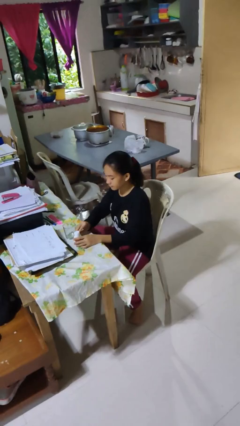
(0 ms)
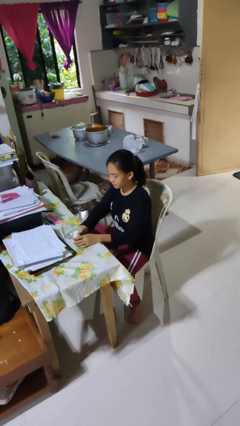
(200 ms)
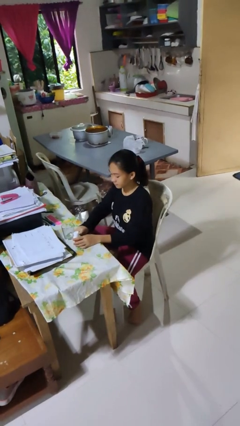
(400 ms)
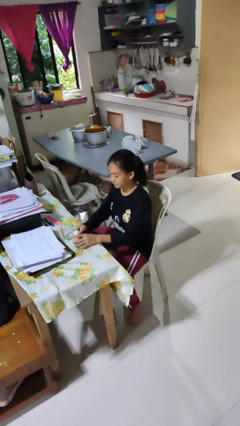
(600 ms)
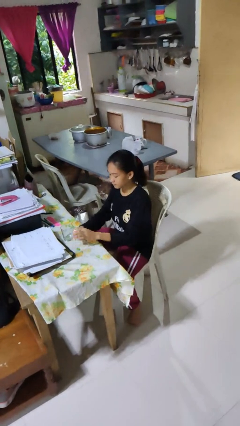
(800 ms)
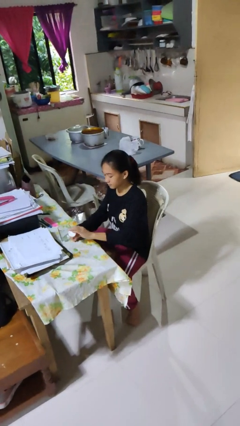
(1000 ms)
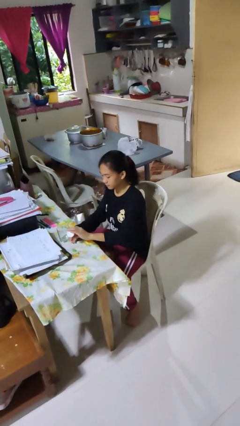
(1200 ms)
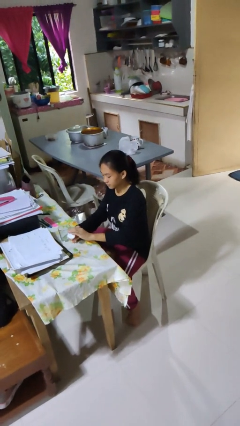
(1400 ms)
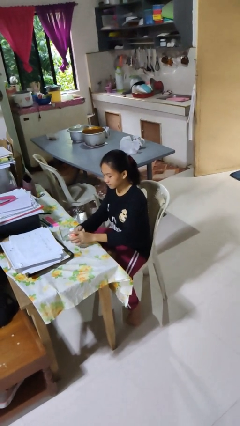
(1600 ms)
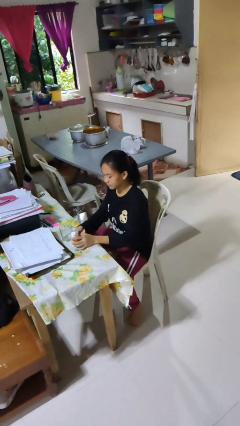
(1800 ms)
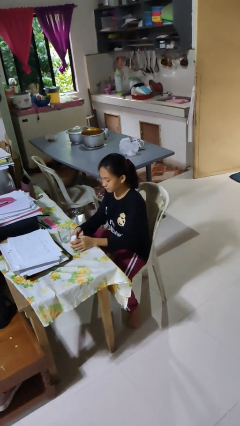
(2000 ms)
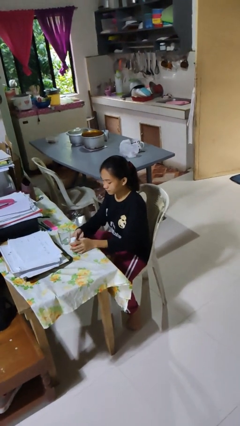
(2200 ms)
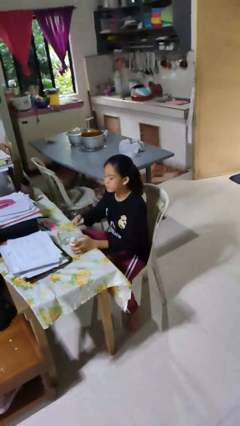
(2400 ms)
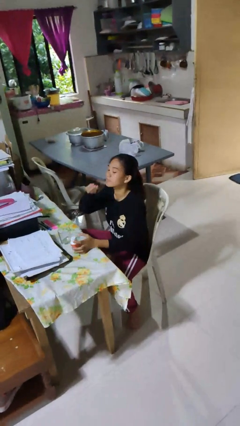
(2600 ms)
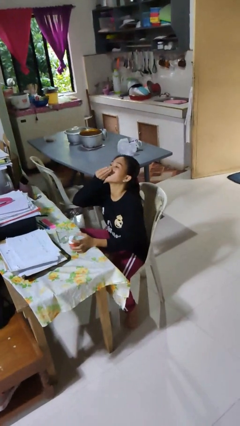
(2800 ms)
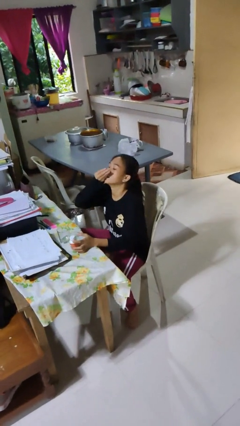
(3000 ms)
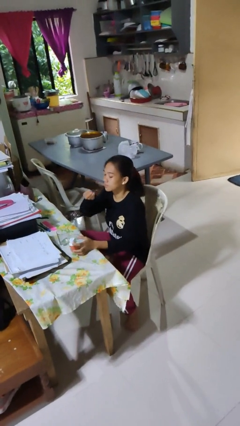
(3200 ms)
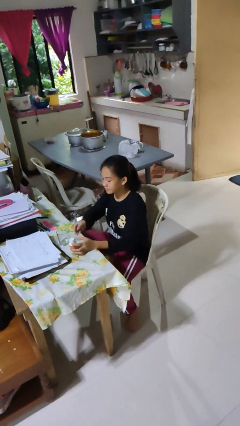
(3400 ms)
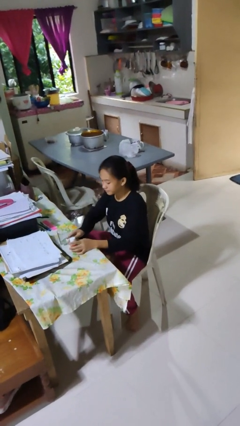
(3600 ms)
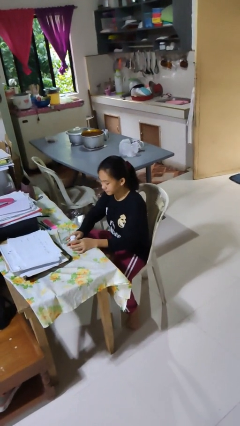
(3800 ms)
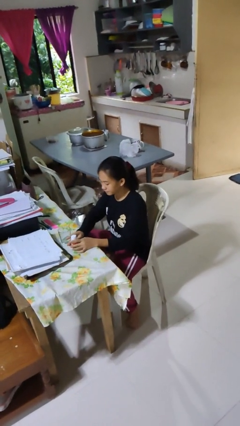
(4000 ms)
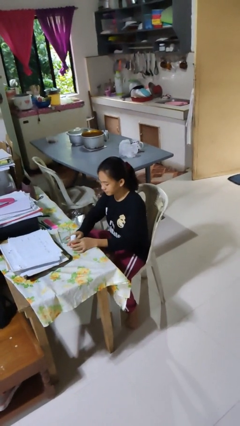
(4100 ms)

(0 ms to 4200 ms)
person takes medicine pills

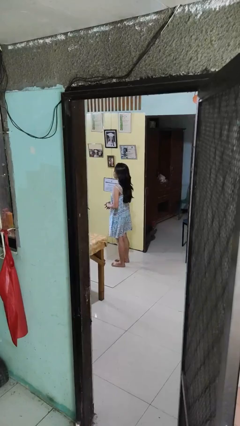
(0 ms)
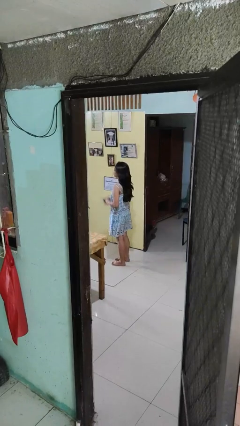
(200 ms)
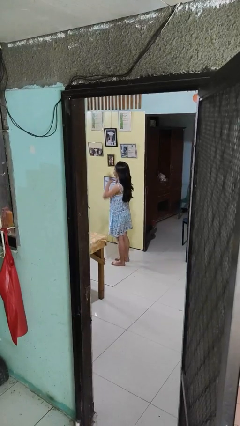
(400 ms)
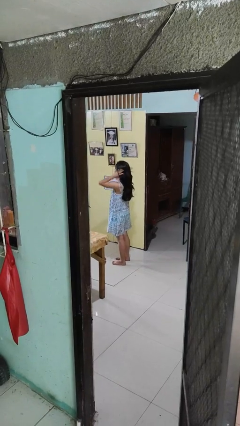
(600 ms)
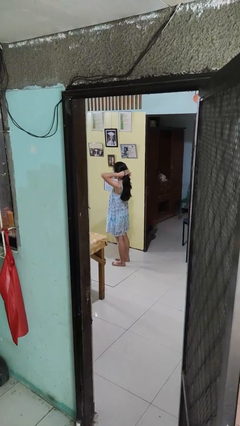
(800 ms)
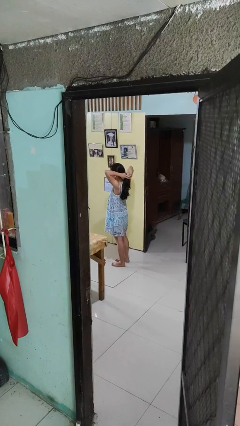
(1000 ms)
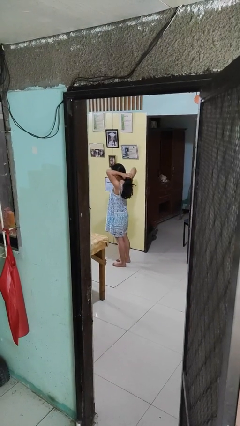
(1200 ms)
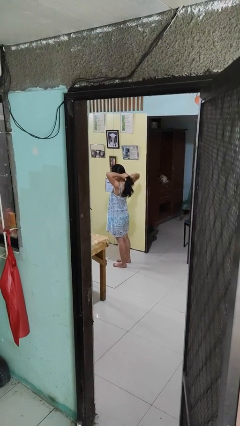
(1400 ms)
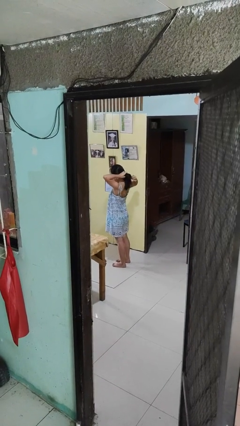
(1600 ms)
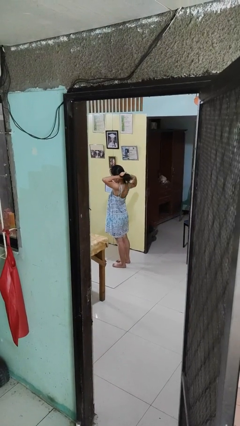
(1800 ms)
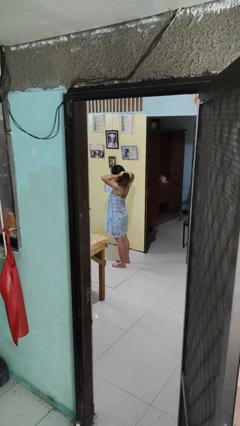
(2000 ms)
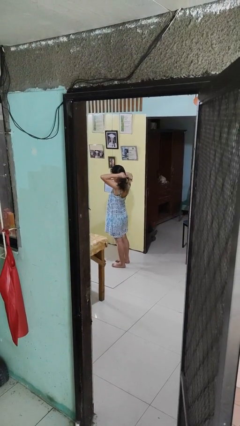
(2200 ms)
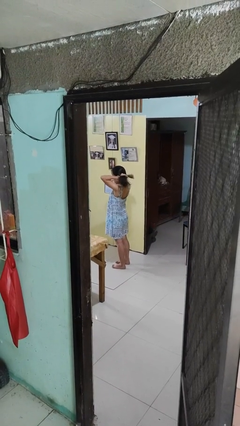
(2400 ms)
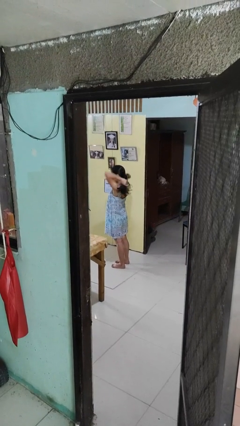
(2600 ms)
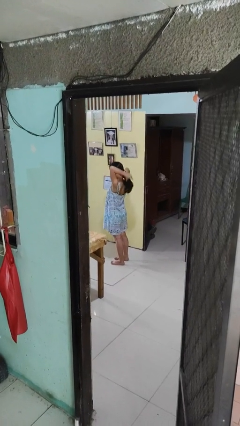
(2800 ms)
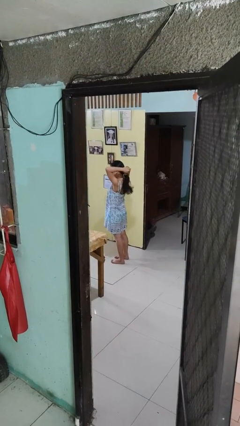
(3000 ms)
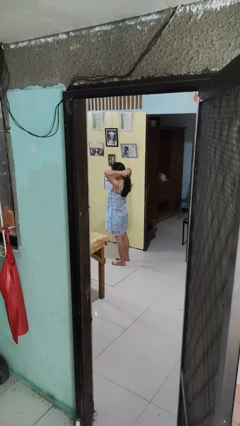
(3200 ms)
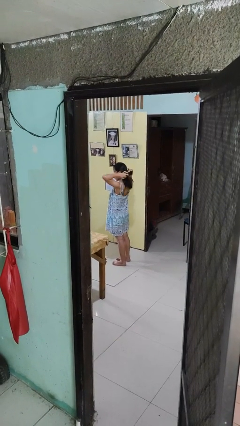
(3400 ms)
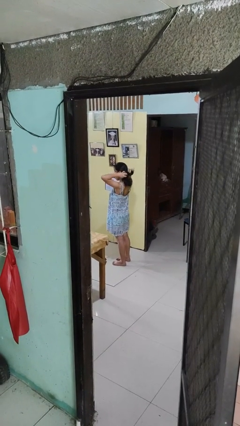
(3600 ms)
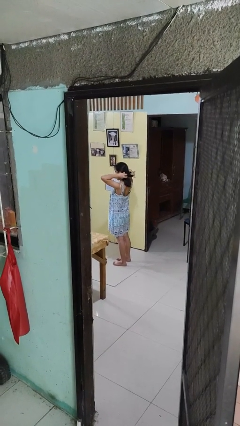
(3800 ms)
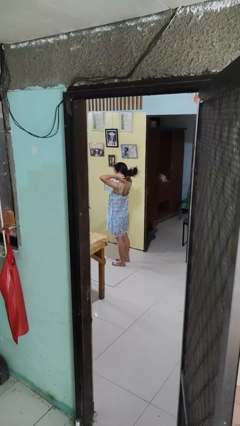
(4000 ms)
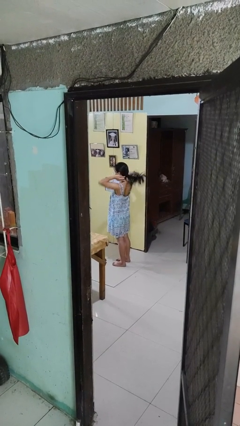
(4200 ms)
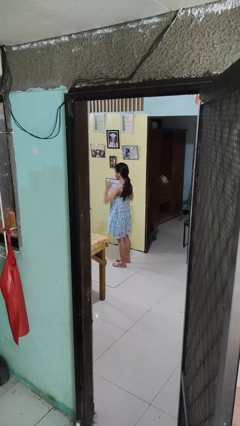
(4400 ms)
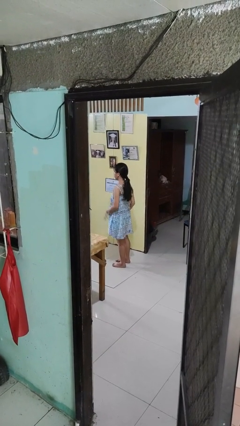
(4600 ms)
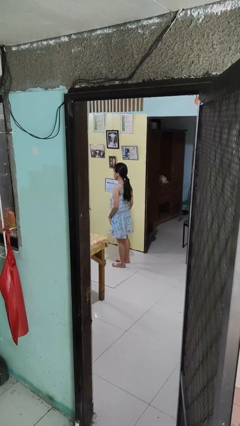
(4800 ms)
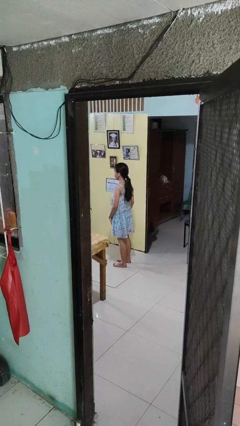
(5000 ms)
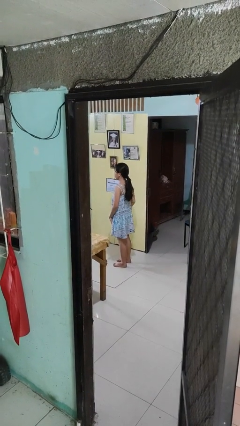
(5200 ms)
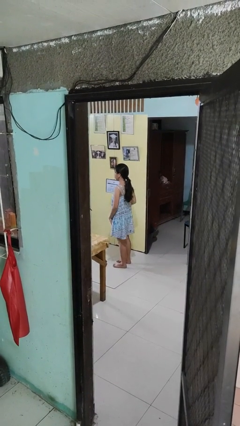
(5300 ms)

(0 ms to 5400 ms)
person puts hair in ponytail

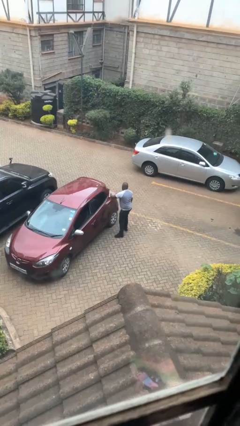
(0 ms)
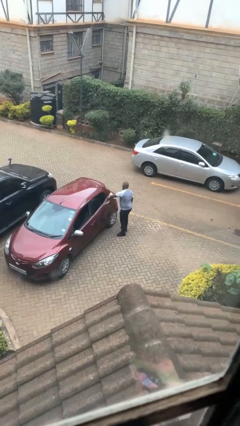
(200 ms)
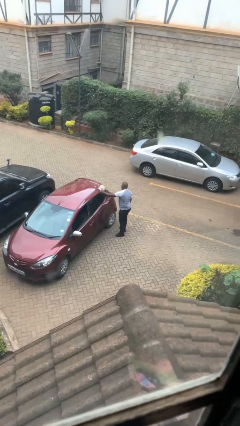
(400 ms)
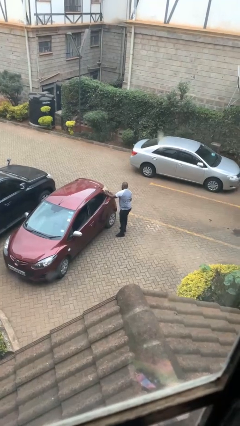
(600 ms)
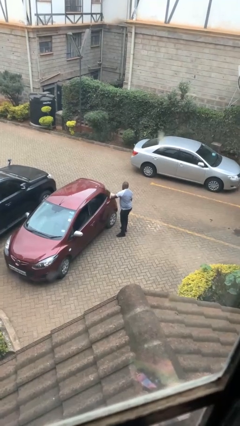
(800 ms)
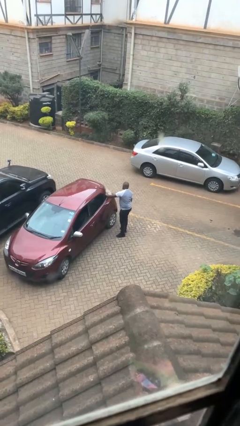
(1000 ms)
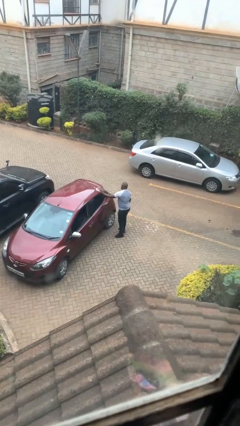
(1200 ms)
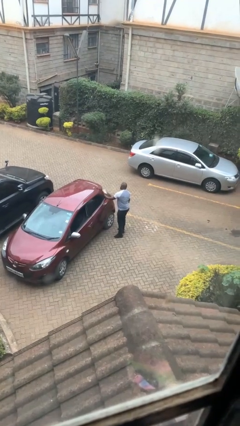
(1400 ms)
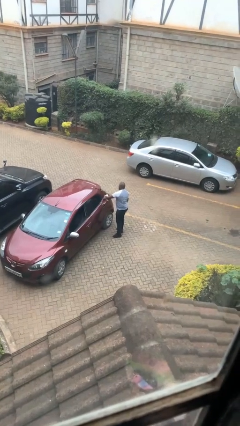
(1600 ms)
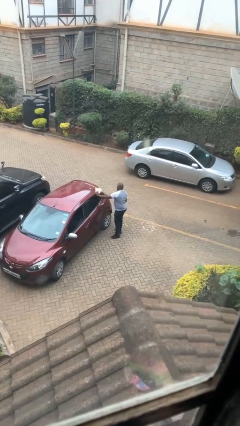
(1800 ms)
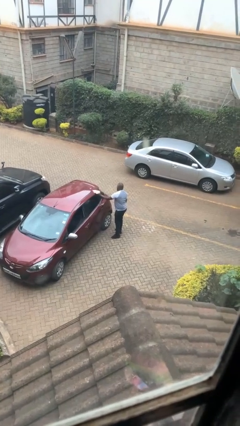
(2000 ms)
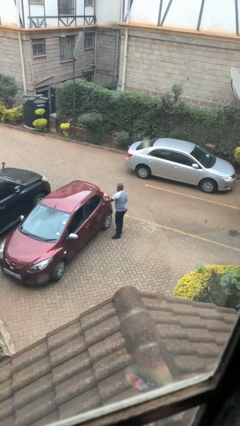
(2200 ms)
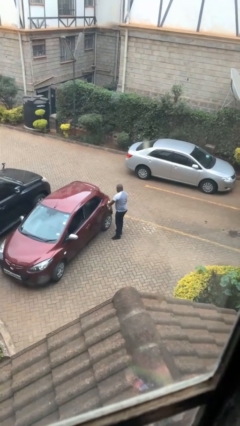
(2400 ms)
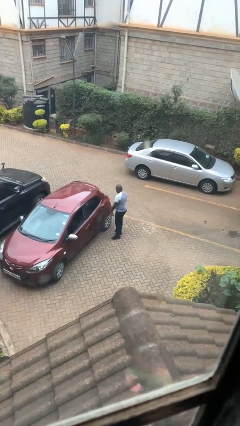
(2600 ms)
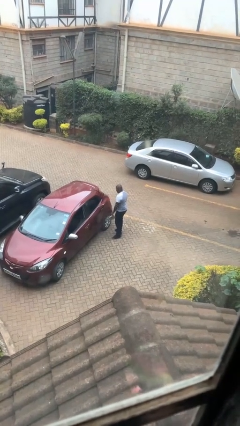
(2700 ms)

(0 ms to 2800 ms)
person polishes car with rag

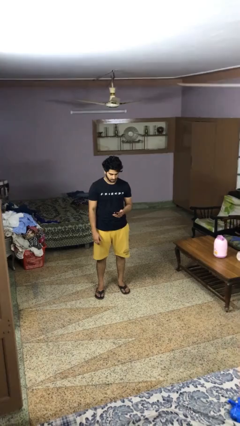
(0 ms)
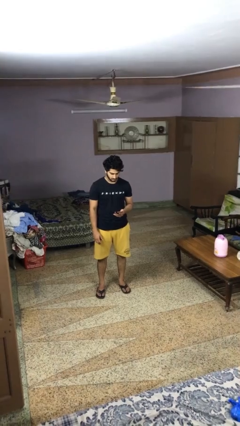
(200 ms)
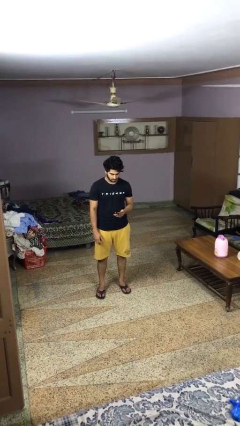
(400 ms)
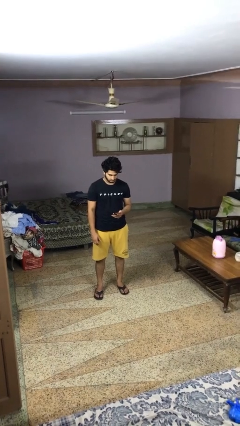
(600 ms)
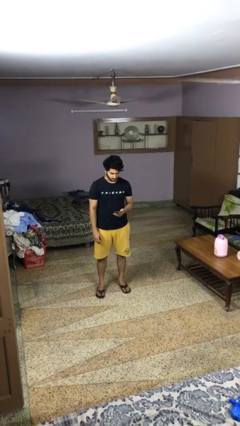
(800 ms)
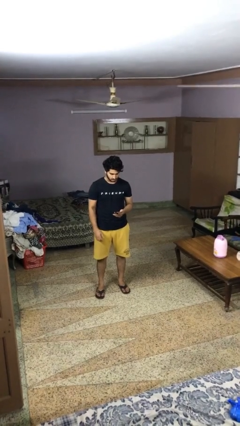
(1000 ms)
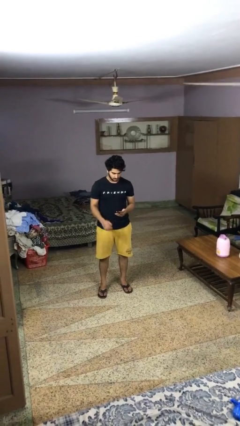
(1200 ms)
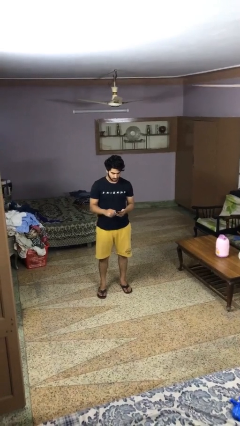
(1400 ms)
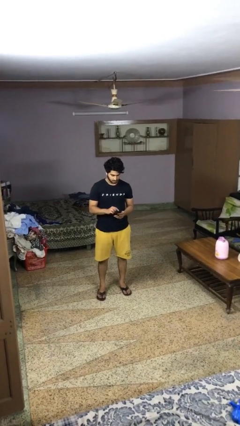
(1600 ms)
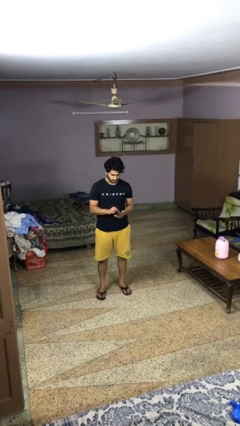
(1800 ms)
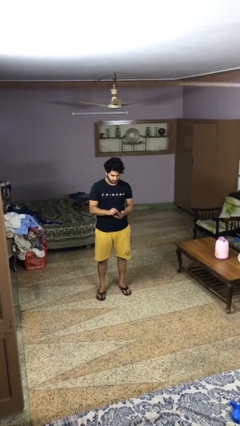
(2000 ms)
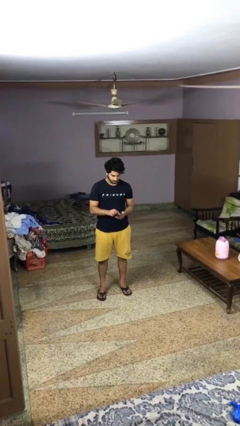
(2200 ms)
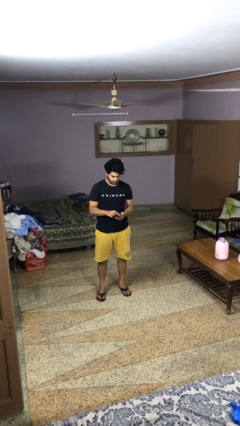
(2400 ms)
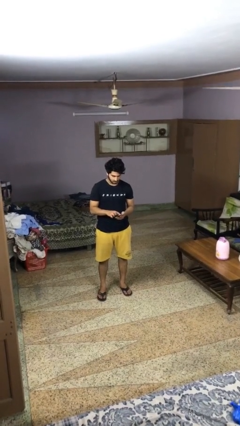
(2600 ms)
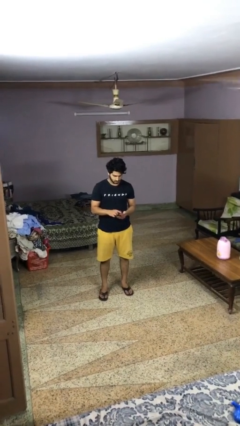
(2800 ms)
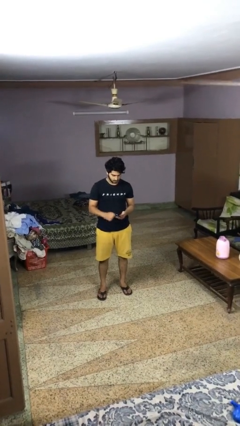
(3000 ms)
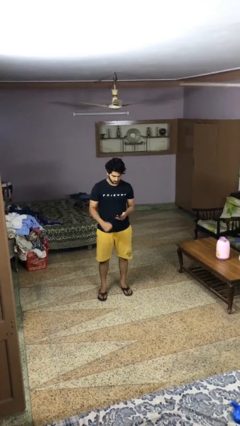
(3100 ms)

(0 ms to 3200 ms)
person gestures zoom in

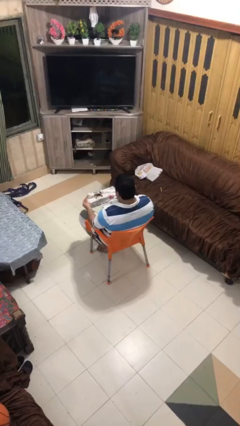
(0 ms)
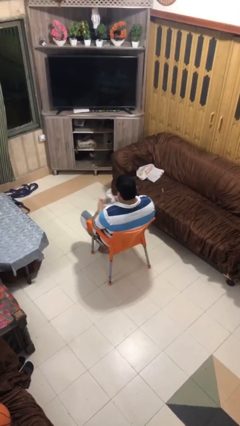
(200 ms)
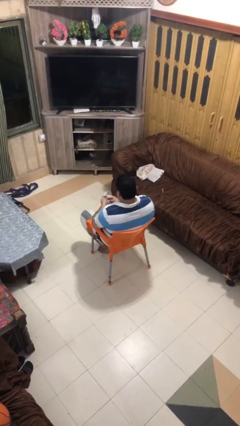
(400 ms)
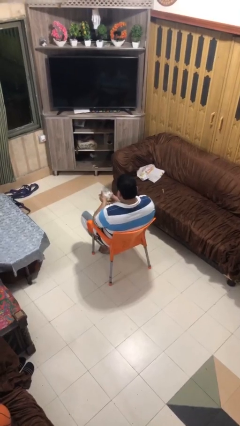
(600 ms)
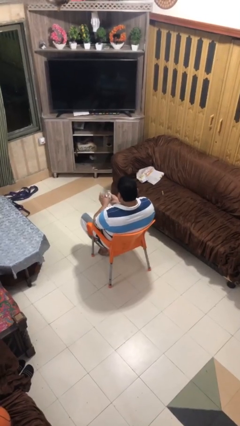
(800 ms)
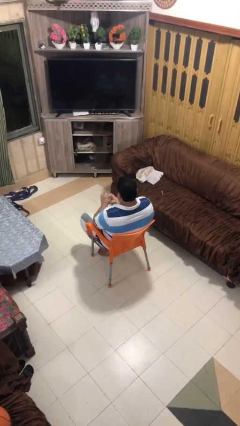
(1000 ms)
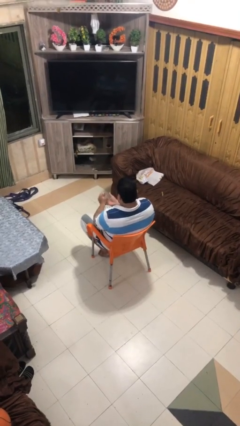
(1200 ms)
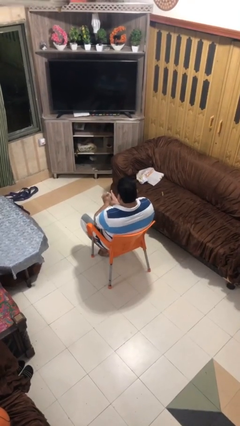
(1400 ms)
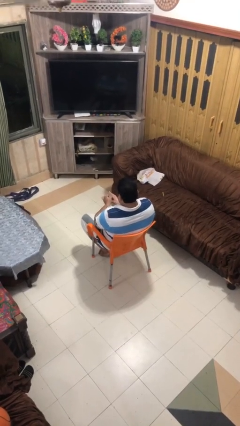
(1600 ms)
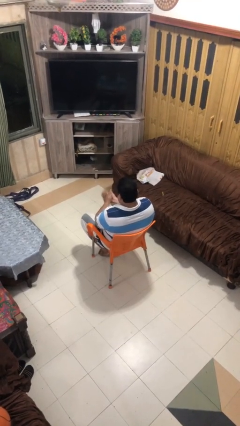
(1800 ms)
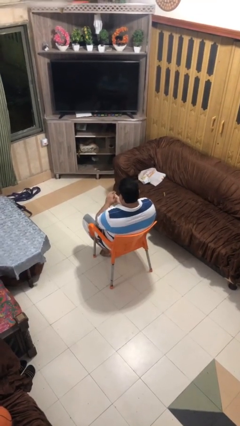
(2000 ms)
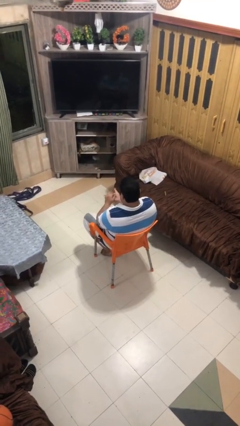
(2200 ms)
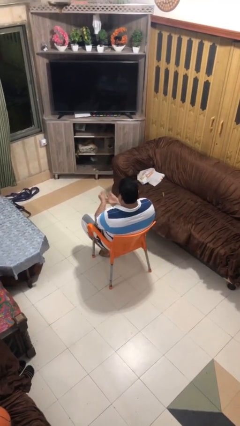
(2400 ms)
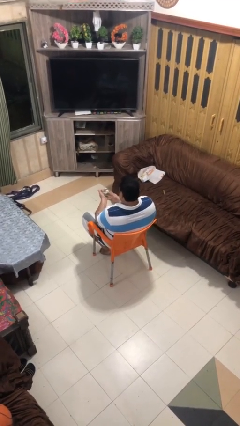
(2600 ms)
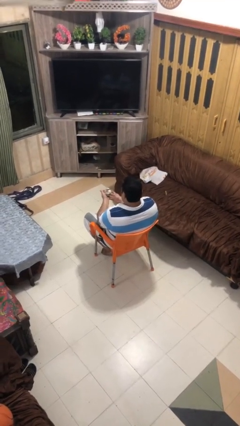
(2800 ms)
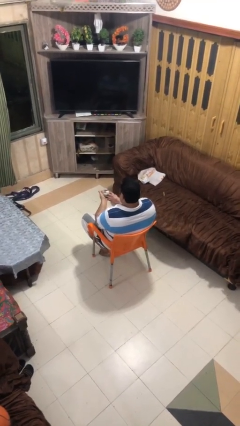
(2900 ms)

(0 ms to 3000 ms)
person crumples paper
